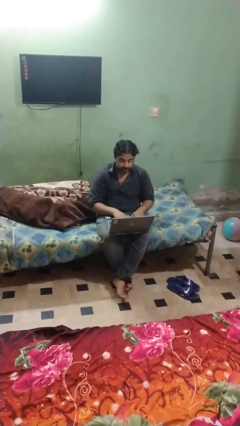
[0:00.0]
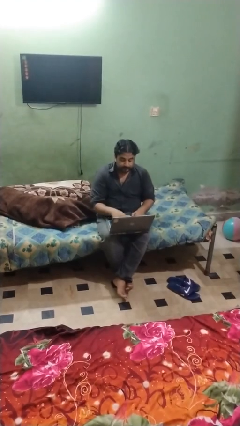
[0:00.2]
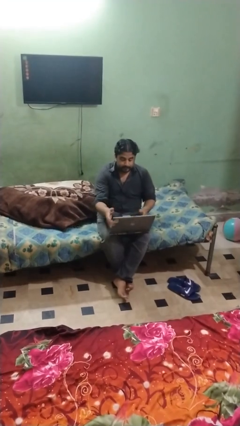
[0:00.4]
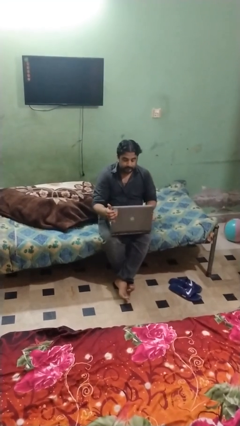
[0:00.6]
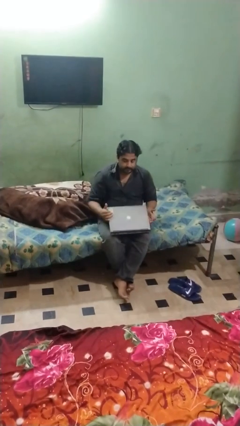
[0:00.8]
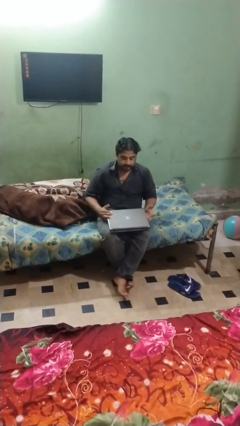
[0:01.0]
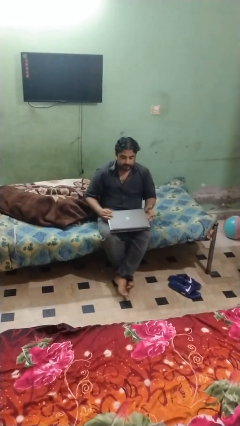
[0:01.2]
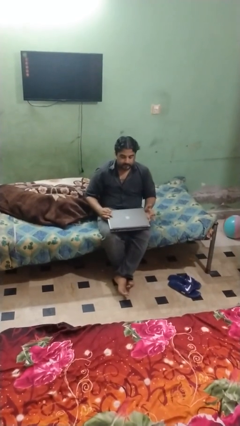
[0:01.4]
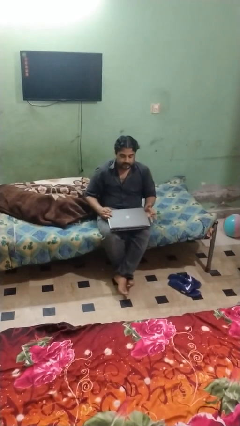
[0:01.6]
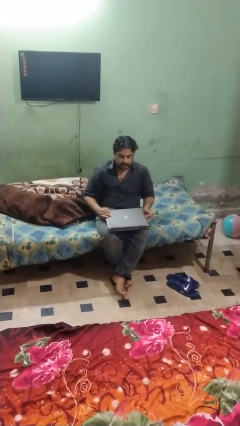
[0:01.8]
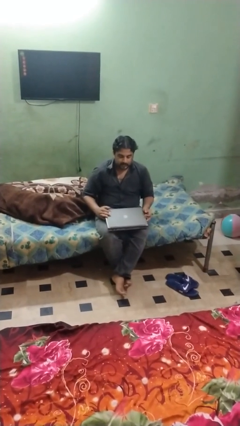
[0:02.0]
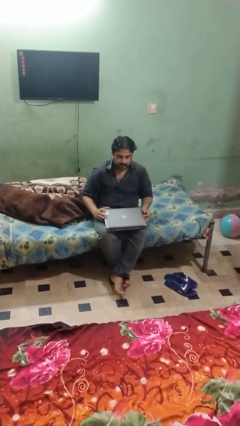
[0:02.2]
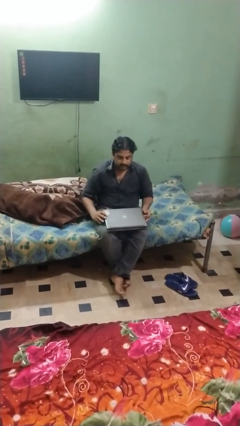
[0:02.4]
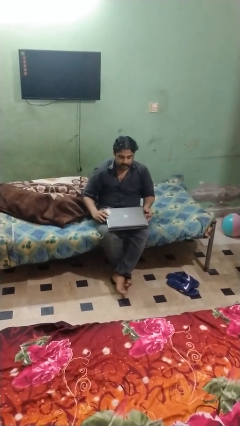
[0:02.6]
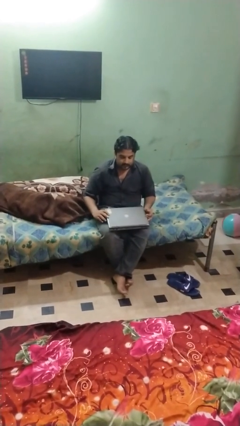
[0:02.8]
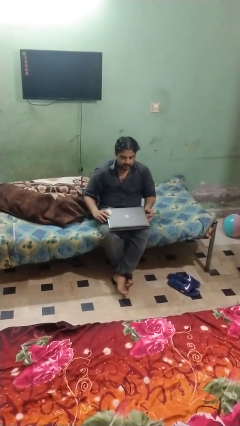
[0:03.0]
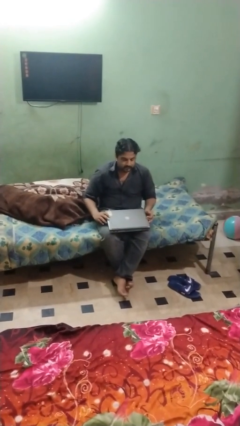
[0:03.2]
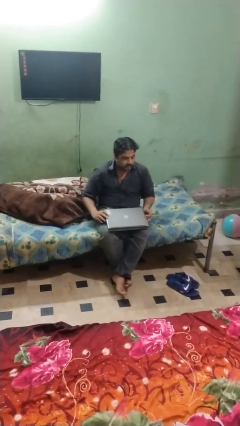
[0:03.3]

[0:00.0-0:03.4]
person closes laptop

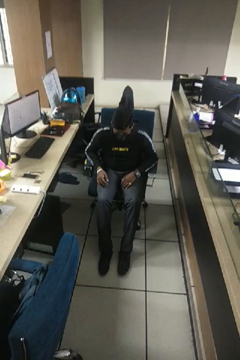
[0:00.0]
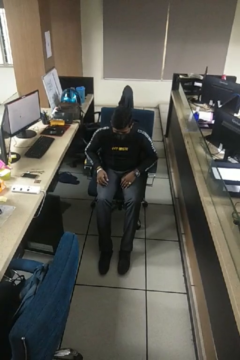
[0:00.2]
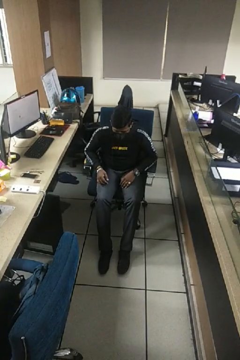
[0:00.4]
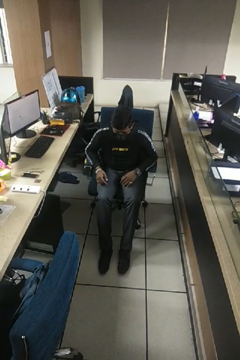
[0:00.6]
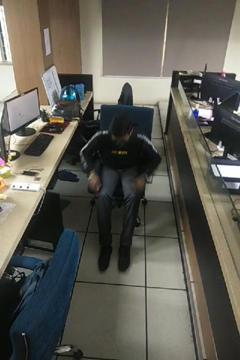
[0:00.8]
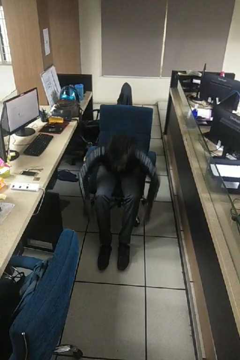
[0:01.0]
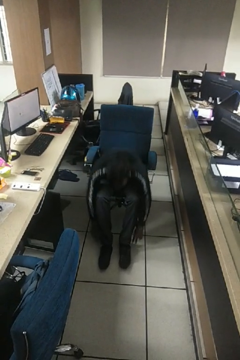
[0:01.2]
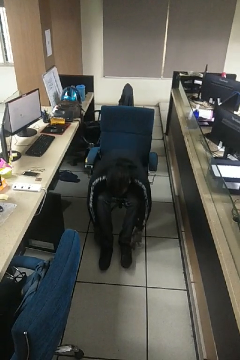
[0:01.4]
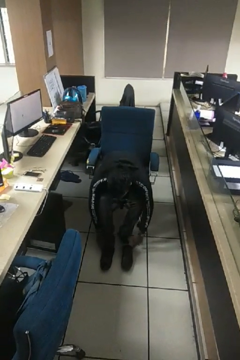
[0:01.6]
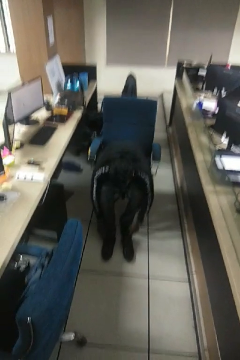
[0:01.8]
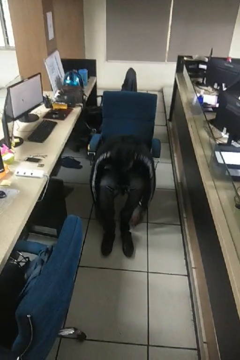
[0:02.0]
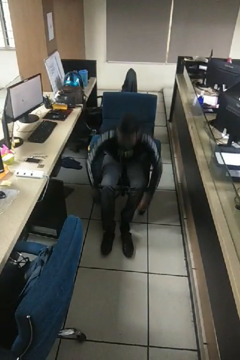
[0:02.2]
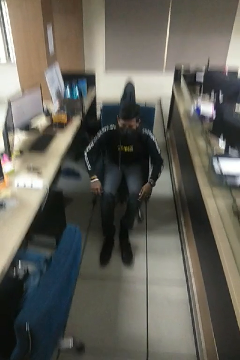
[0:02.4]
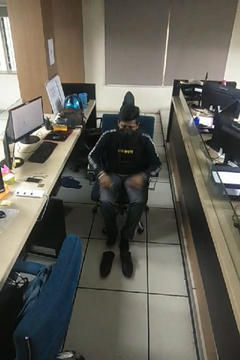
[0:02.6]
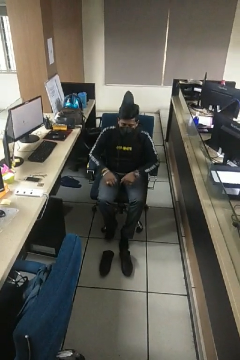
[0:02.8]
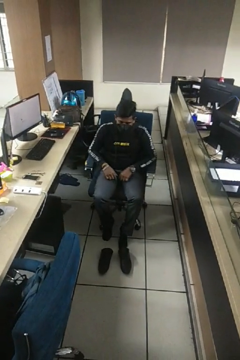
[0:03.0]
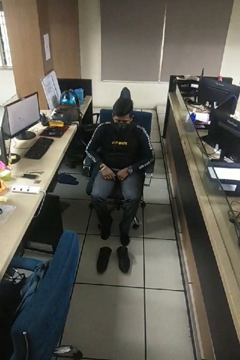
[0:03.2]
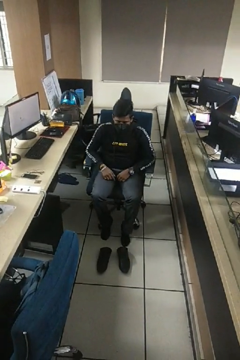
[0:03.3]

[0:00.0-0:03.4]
person takes off shoes

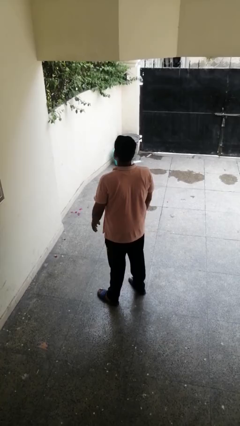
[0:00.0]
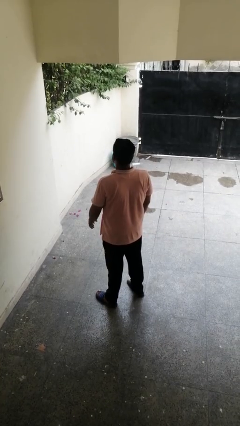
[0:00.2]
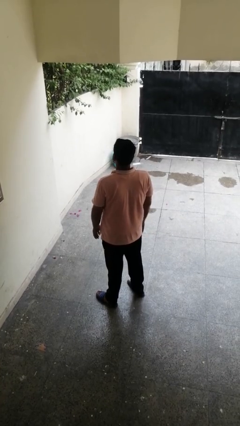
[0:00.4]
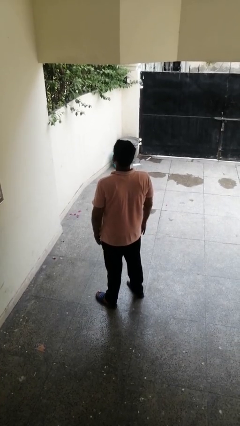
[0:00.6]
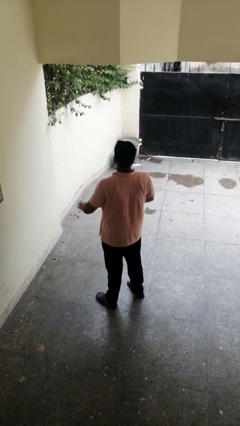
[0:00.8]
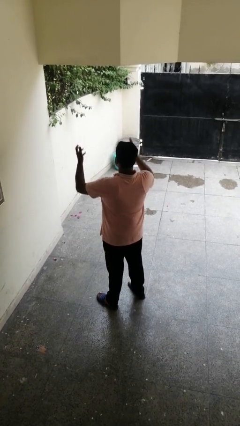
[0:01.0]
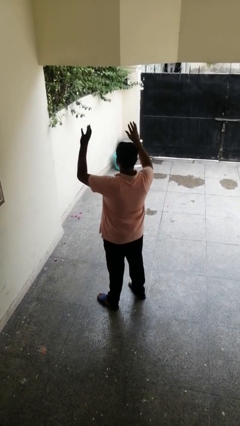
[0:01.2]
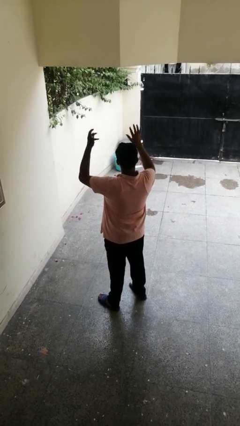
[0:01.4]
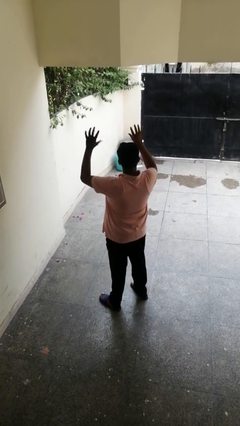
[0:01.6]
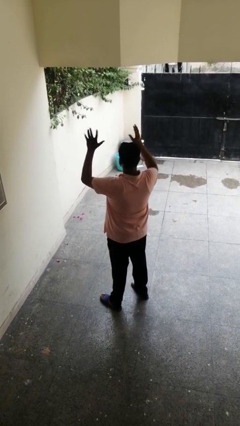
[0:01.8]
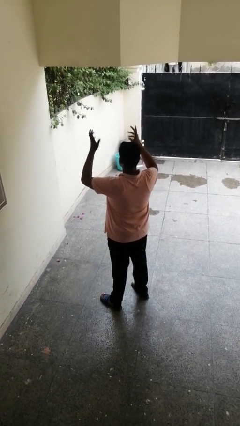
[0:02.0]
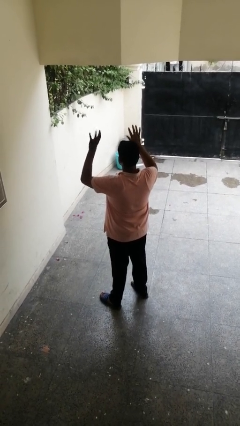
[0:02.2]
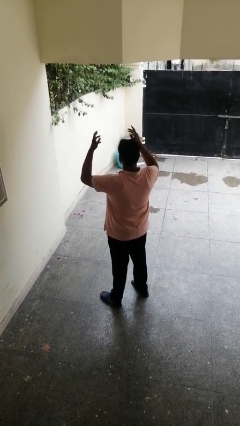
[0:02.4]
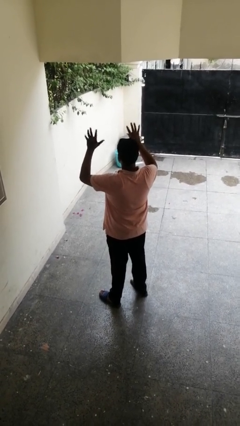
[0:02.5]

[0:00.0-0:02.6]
person dances in place

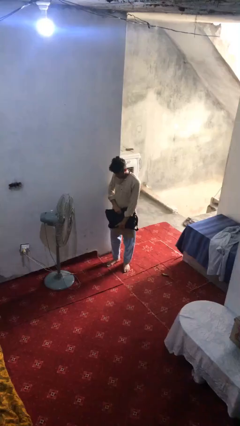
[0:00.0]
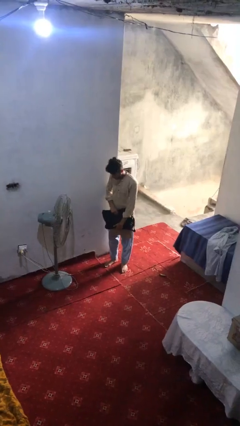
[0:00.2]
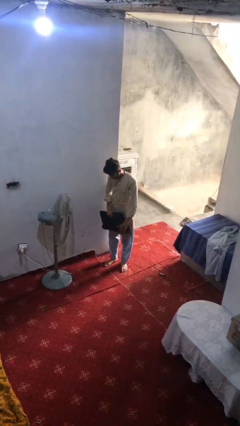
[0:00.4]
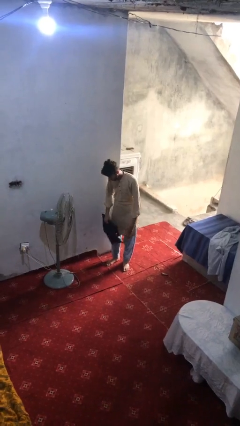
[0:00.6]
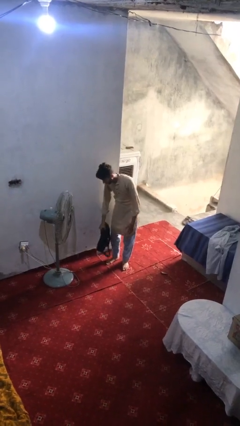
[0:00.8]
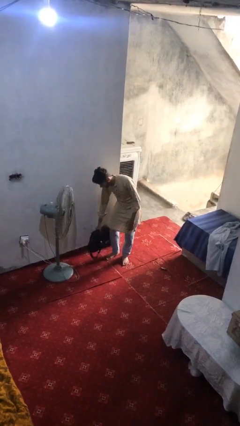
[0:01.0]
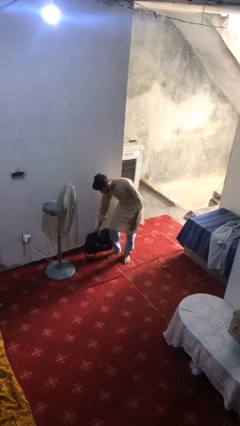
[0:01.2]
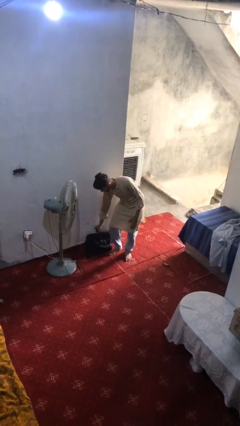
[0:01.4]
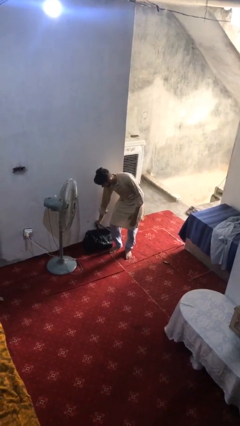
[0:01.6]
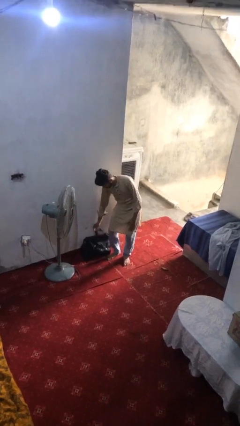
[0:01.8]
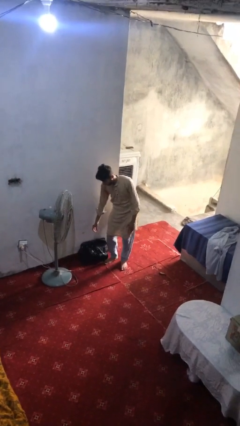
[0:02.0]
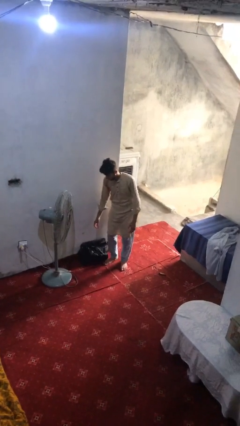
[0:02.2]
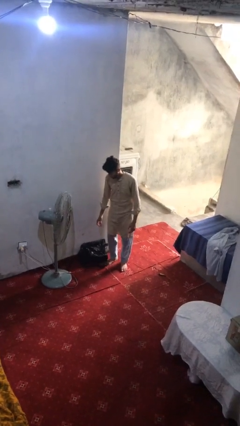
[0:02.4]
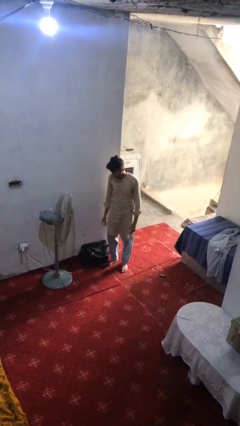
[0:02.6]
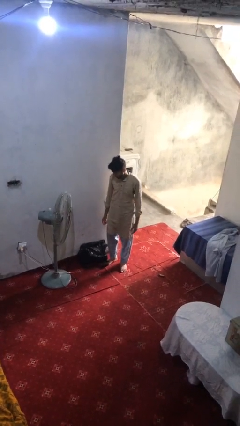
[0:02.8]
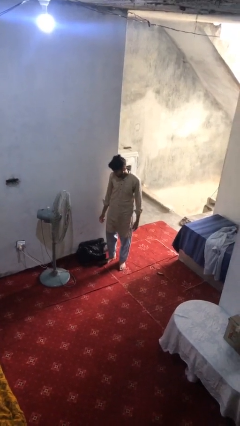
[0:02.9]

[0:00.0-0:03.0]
person puts down object on floor

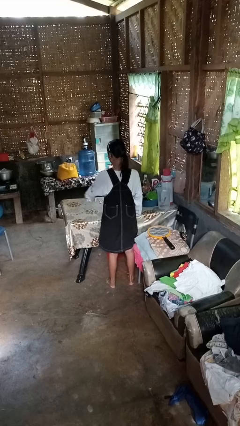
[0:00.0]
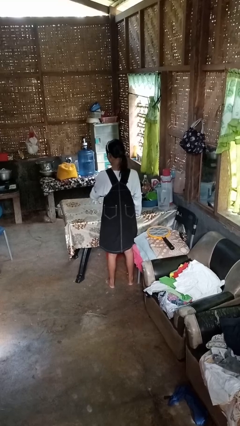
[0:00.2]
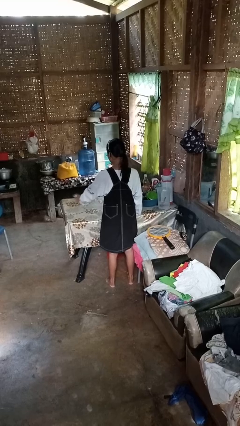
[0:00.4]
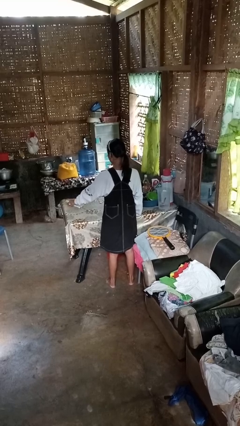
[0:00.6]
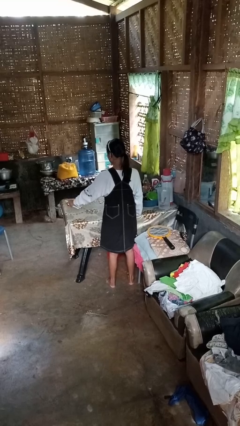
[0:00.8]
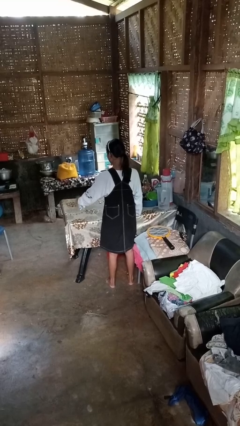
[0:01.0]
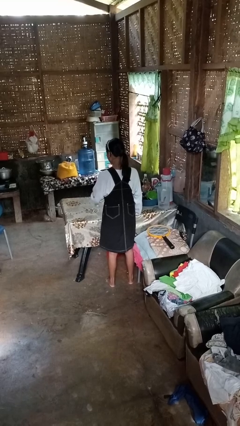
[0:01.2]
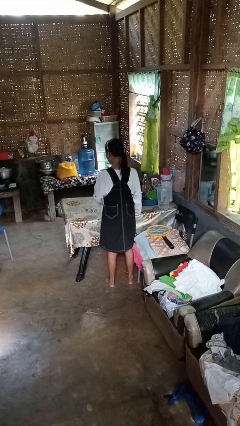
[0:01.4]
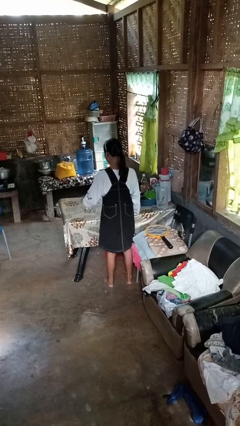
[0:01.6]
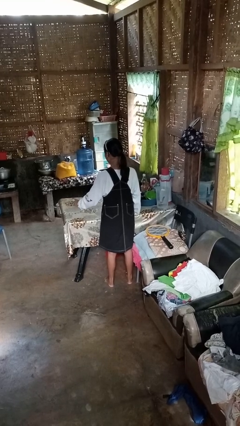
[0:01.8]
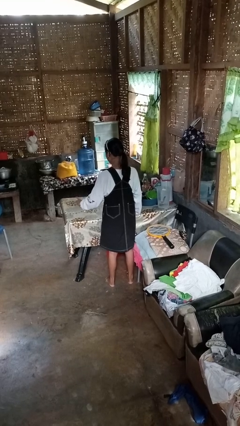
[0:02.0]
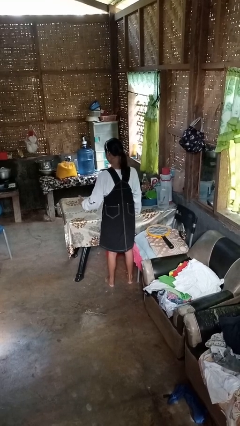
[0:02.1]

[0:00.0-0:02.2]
person sprays from bottle

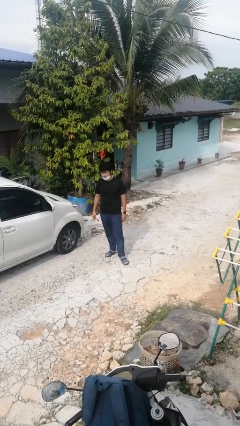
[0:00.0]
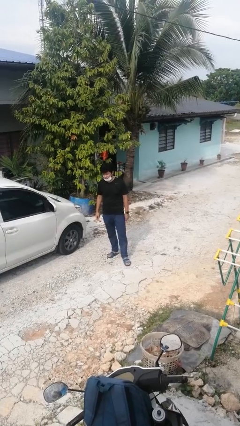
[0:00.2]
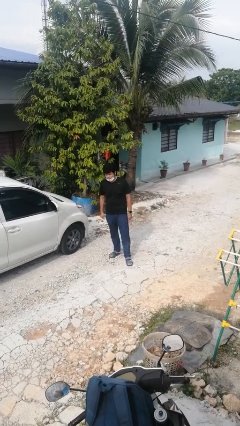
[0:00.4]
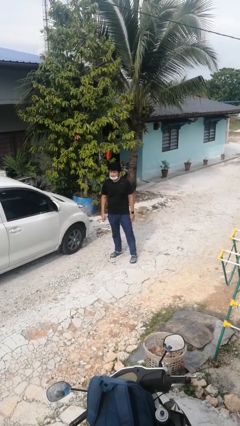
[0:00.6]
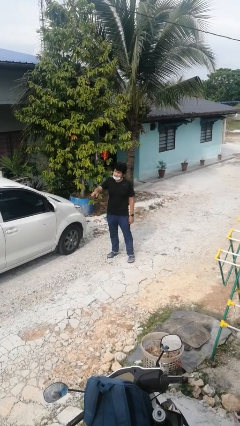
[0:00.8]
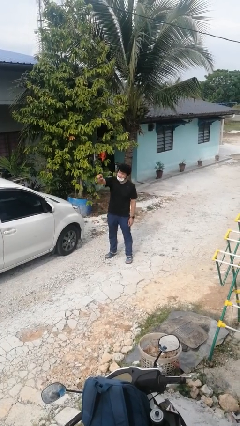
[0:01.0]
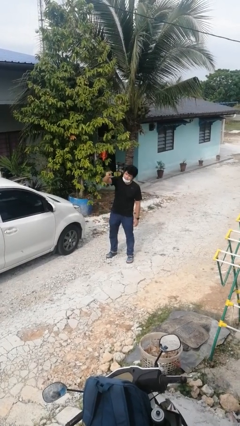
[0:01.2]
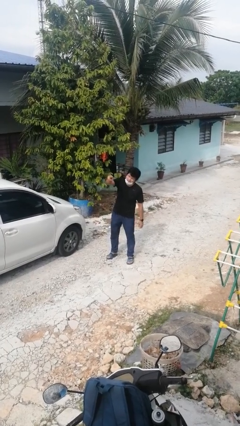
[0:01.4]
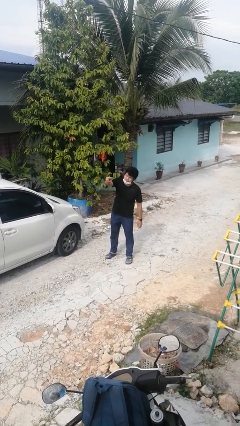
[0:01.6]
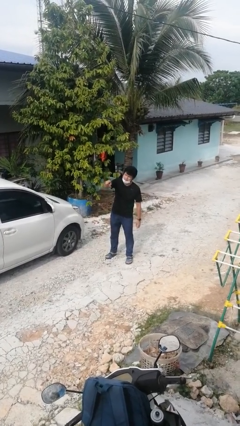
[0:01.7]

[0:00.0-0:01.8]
person points at person

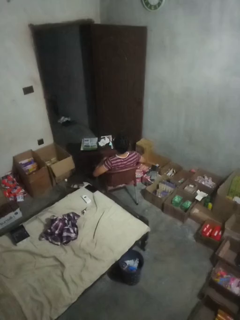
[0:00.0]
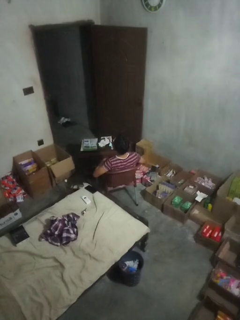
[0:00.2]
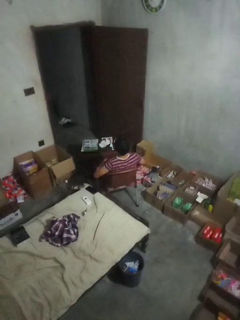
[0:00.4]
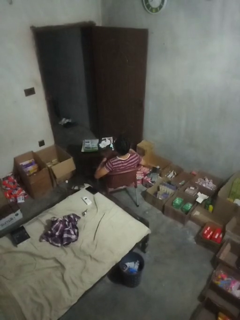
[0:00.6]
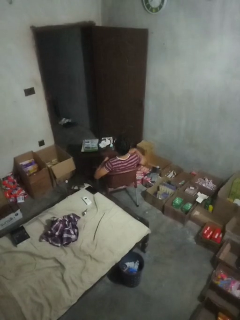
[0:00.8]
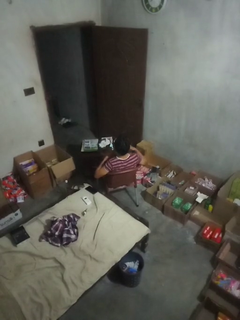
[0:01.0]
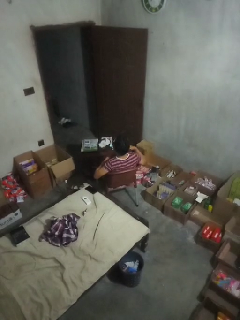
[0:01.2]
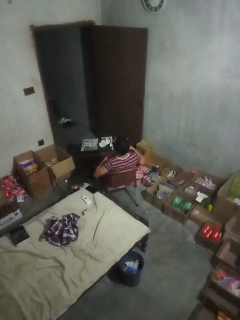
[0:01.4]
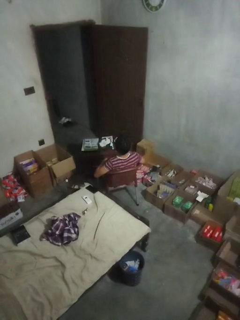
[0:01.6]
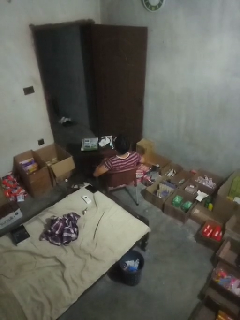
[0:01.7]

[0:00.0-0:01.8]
person drums on chest
